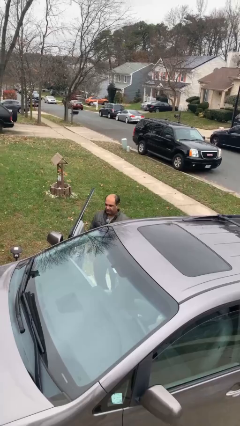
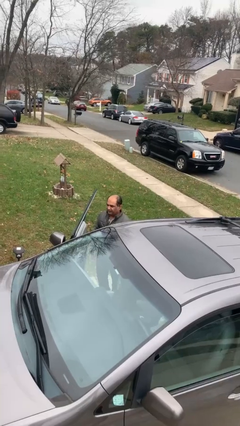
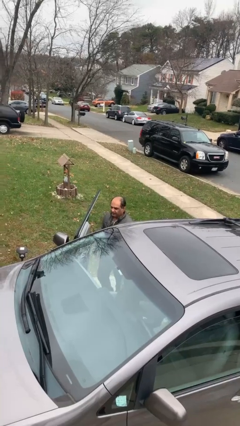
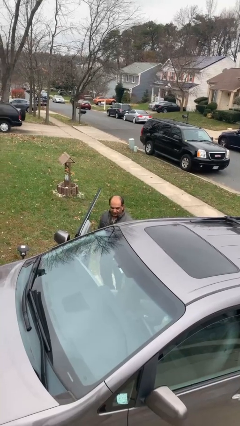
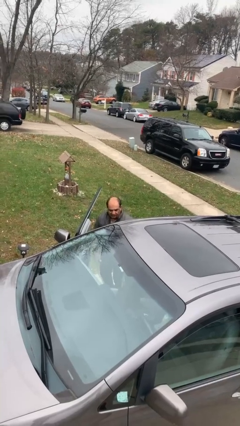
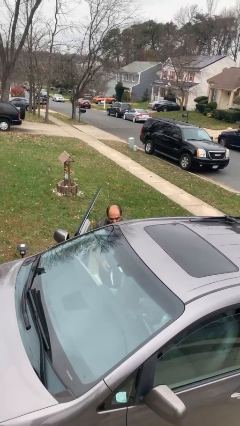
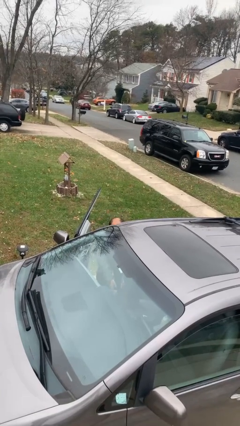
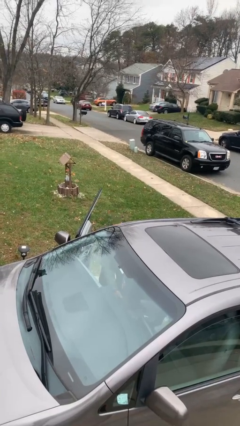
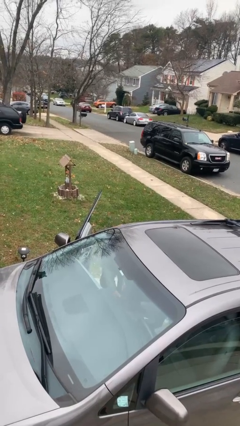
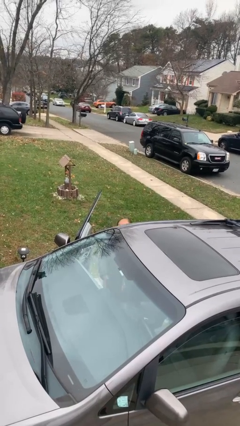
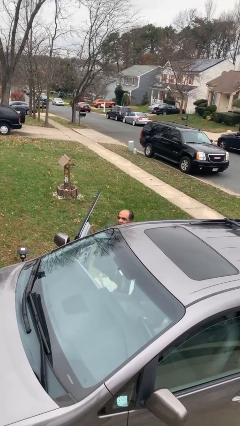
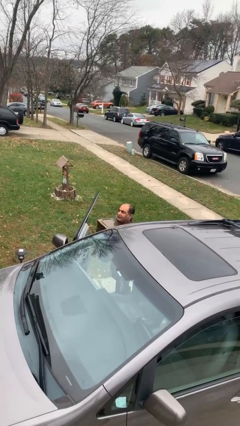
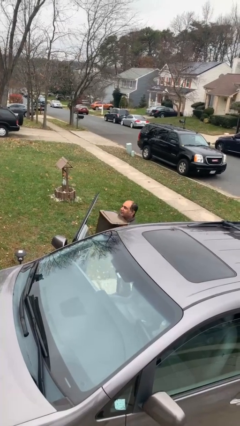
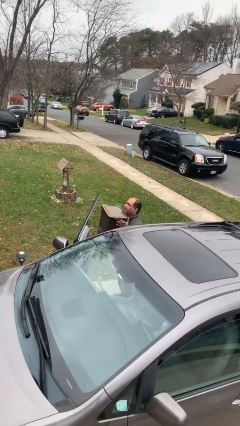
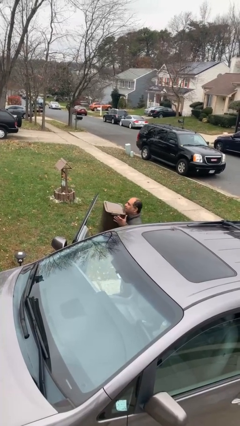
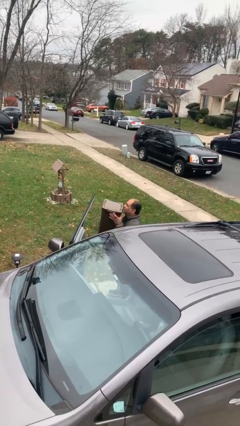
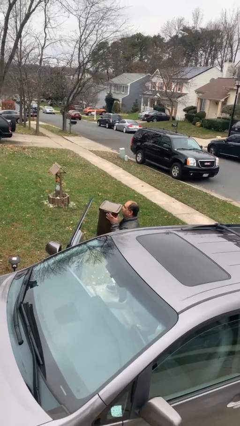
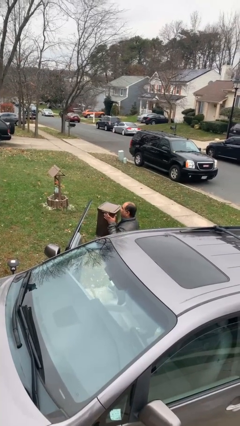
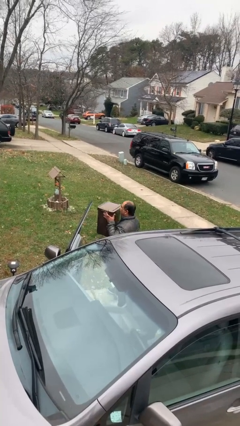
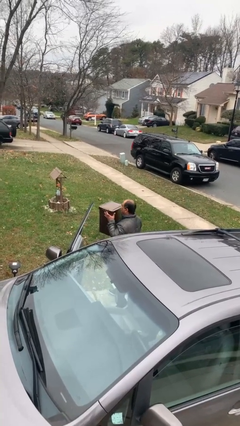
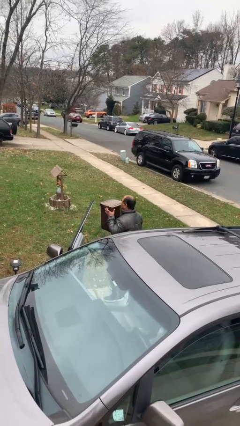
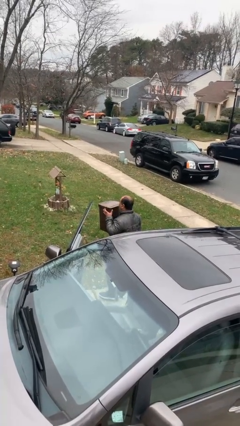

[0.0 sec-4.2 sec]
person unloads car

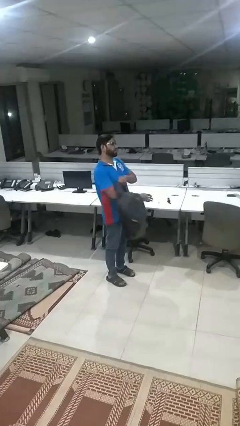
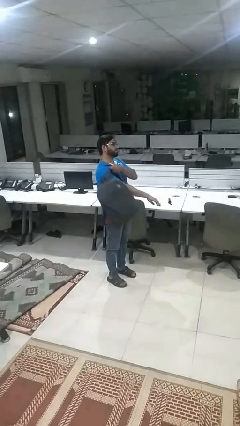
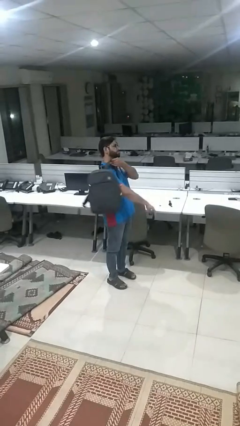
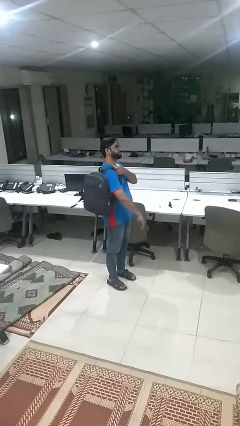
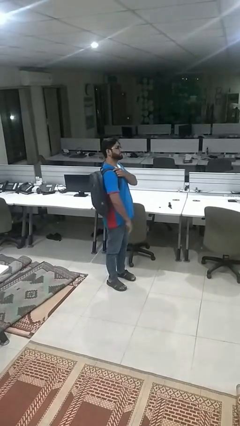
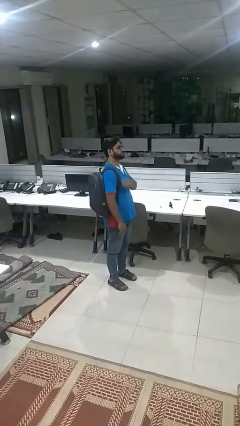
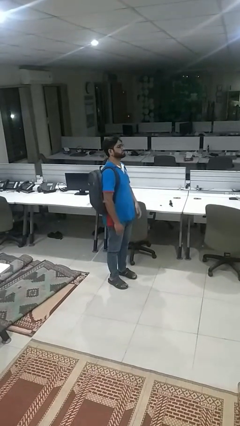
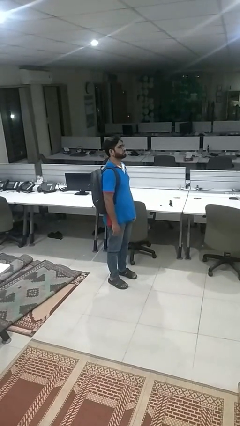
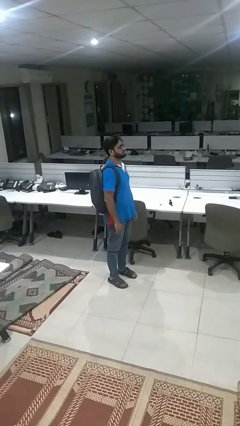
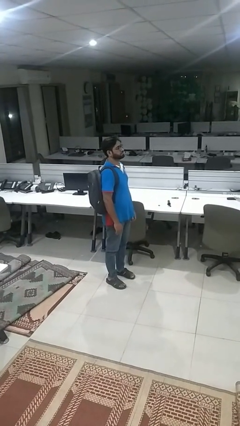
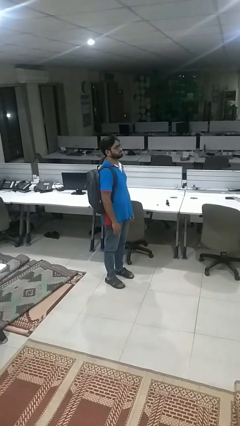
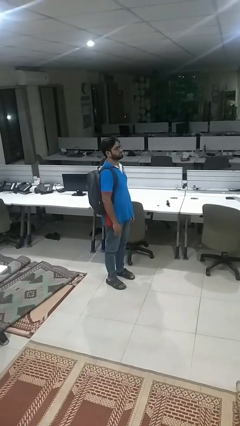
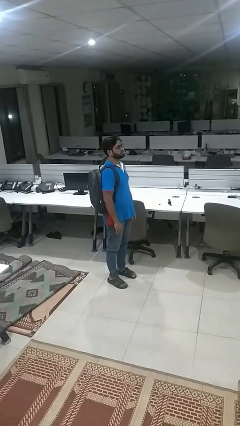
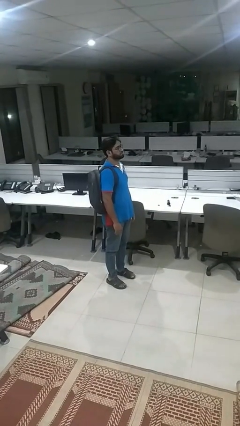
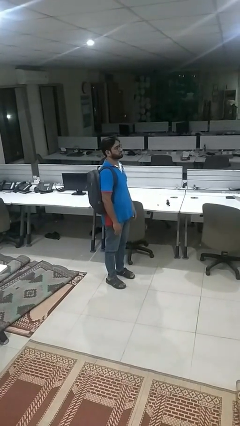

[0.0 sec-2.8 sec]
person puts on backpack

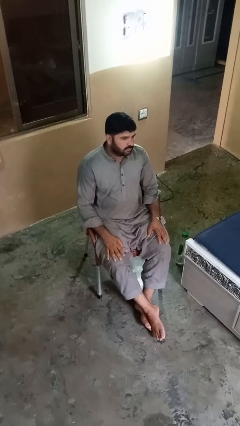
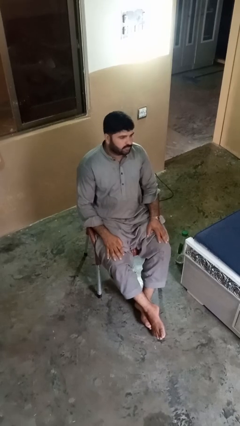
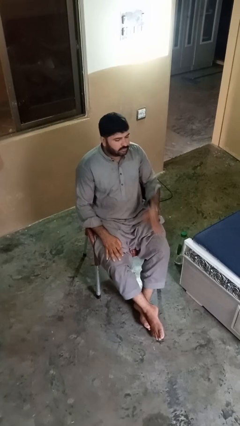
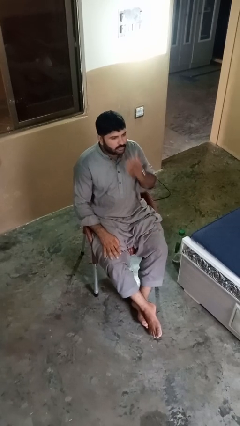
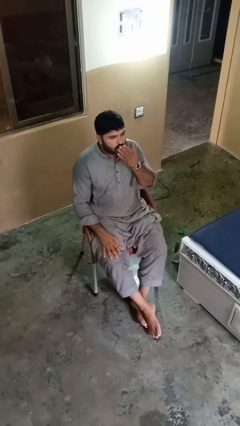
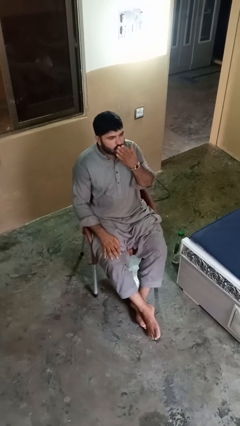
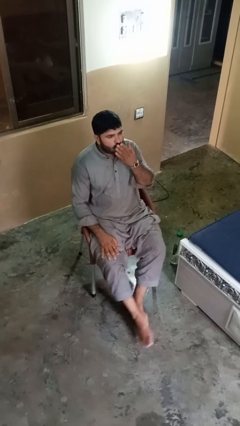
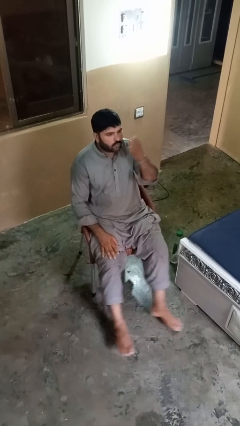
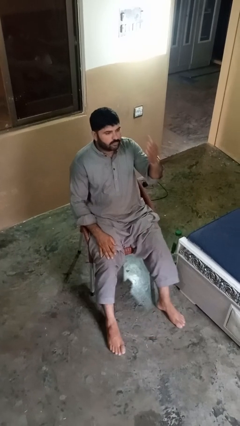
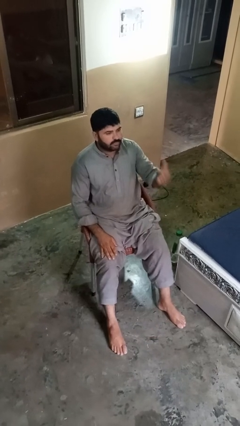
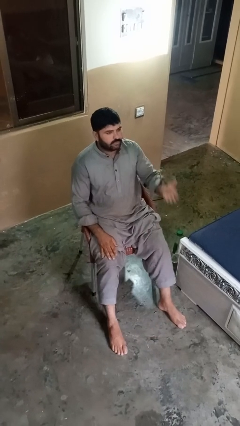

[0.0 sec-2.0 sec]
person gestures blow kiss

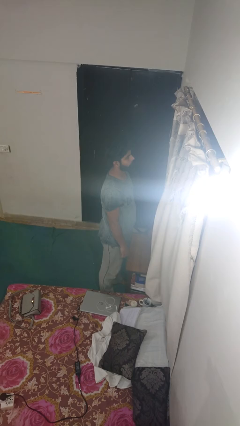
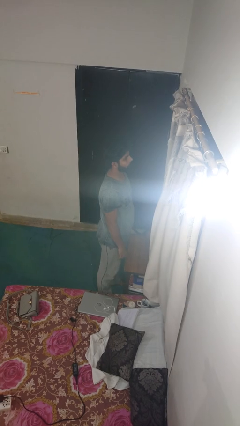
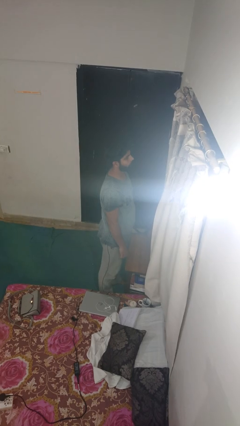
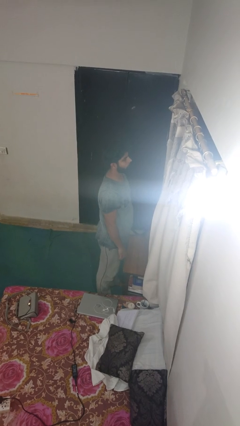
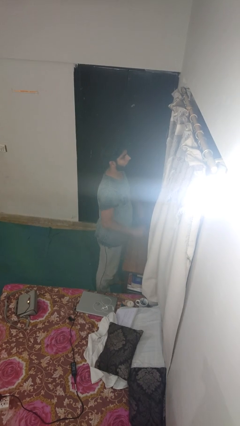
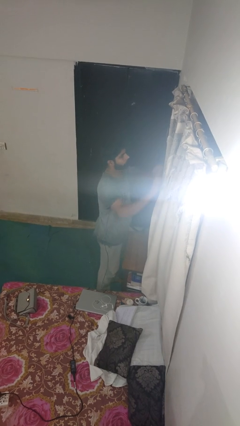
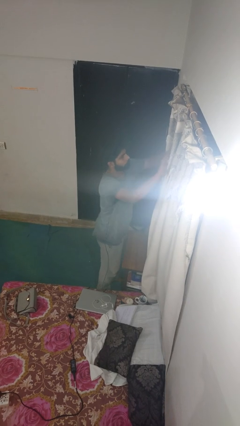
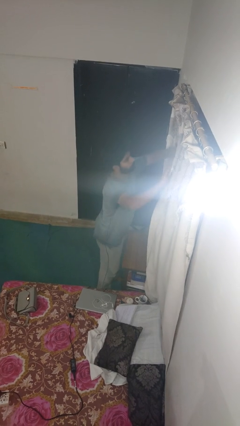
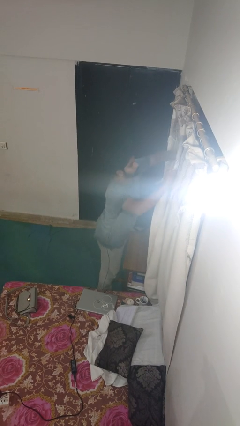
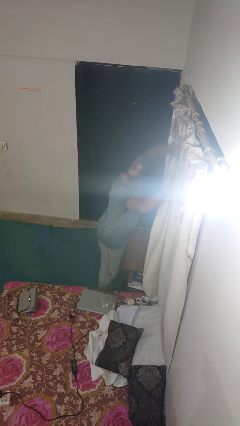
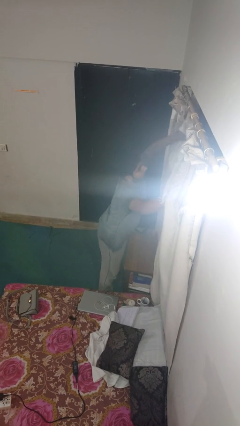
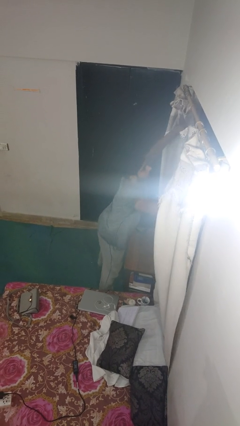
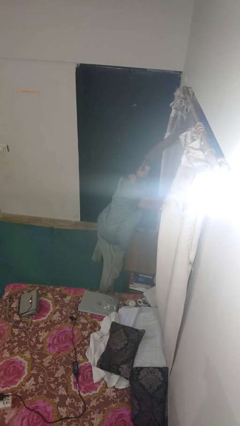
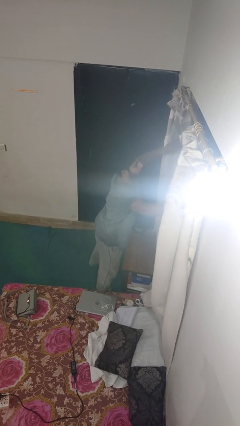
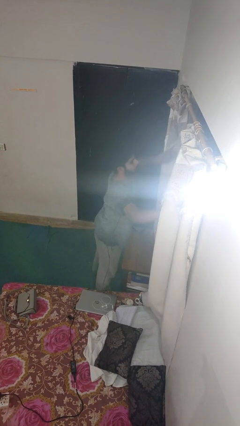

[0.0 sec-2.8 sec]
person opens curtains

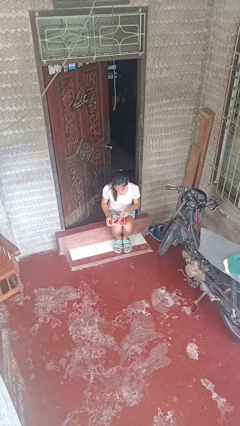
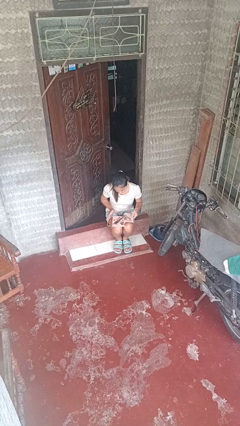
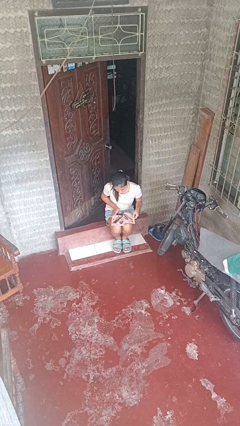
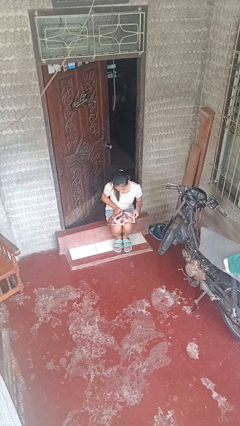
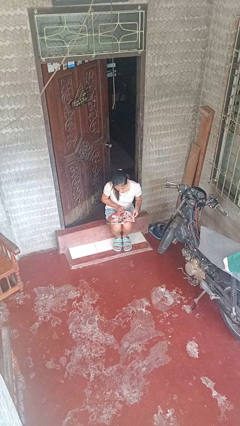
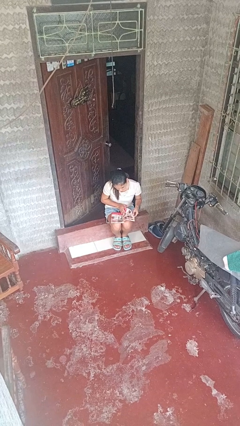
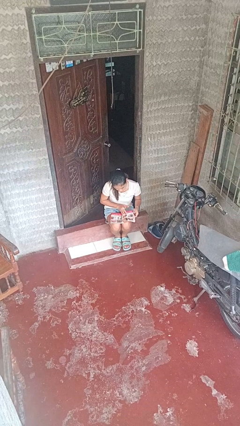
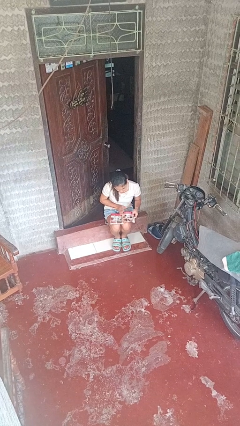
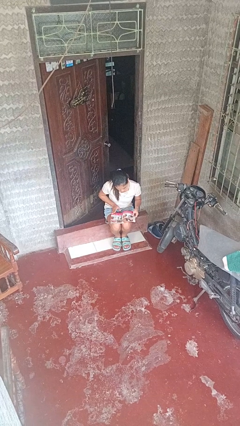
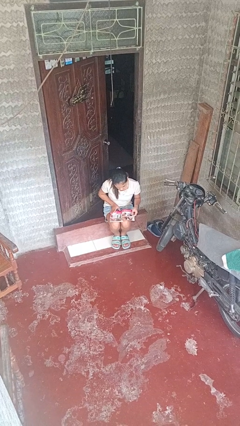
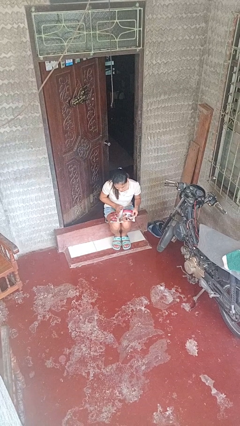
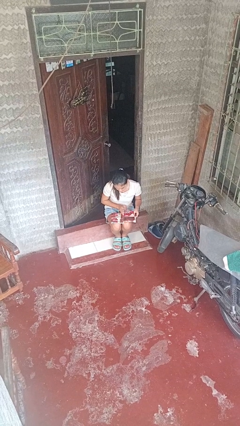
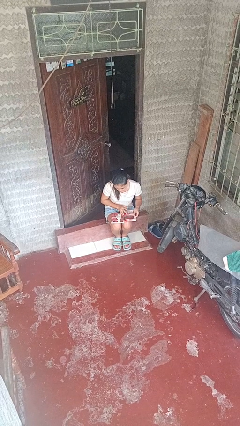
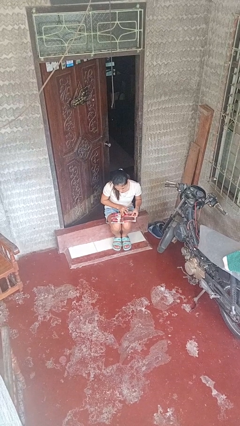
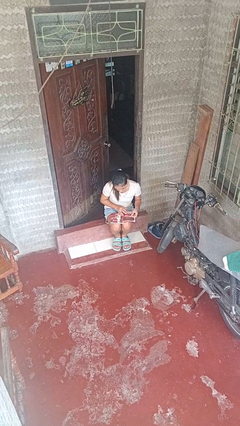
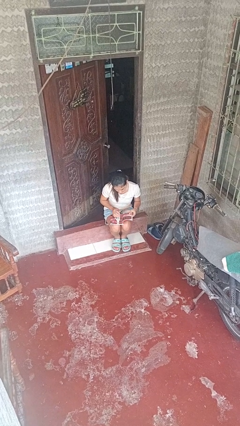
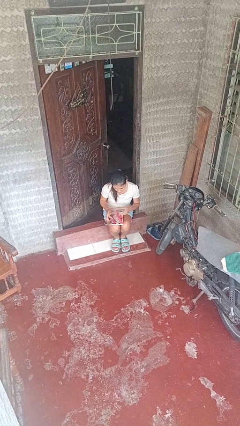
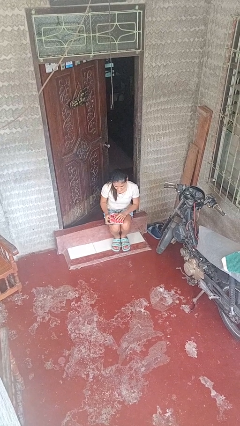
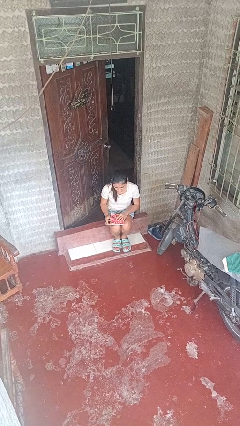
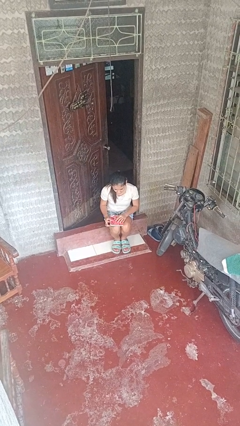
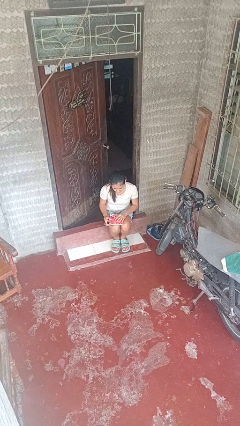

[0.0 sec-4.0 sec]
person reads magazine

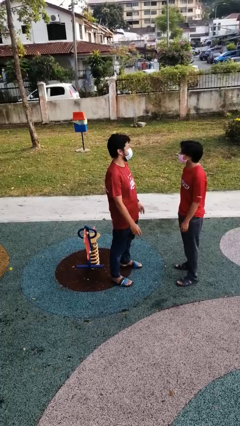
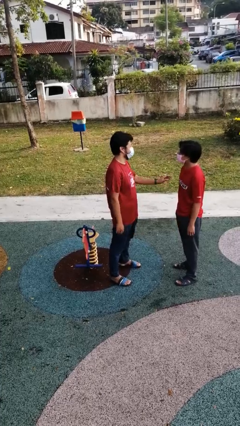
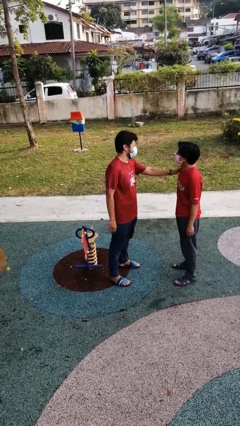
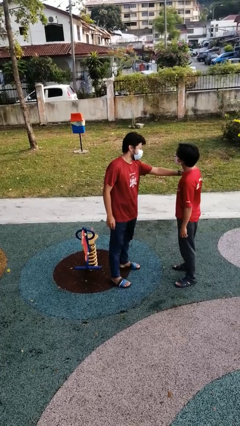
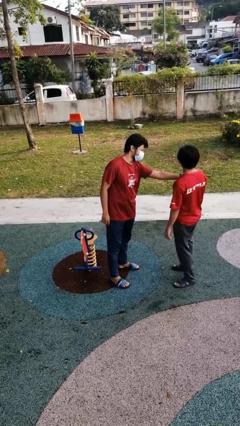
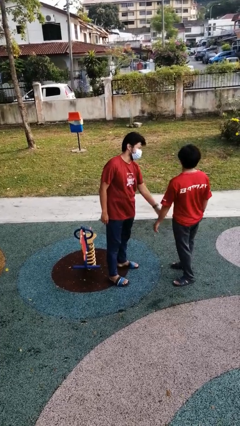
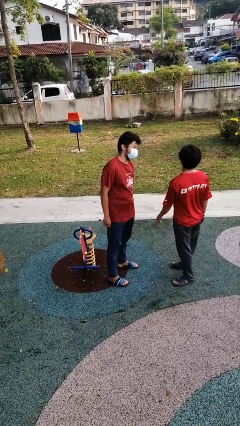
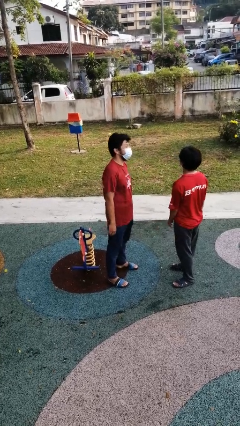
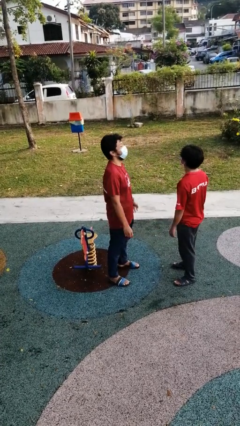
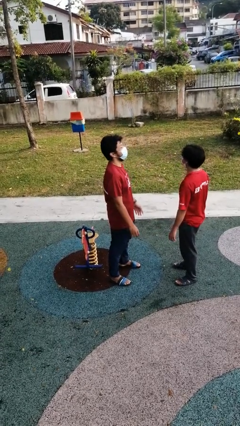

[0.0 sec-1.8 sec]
person shoves person
